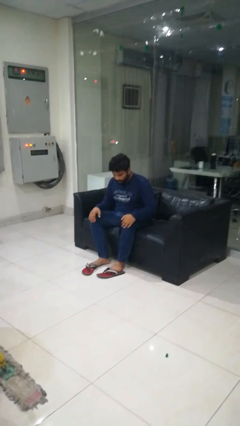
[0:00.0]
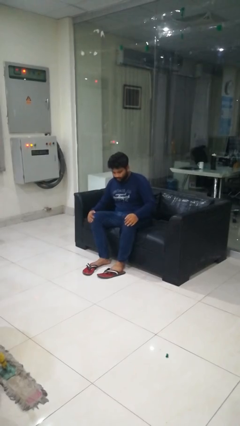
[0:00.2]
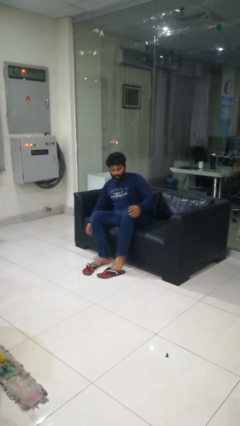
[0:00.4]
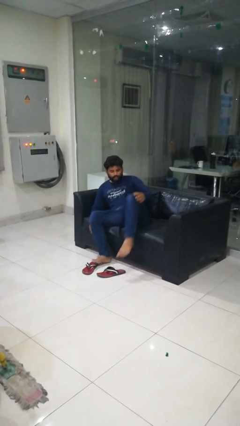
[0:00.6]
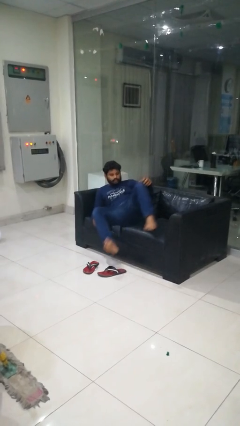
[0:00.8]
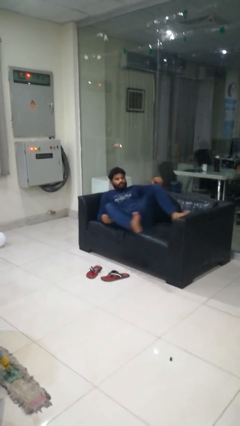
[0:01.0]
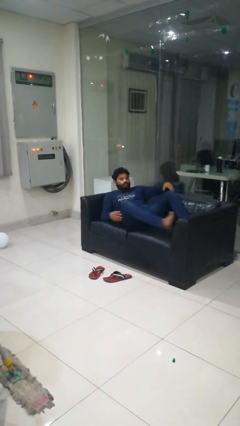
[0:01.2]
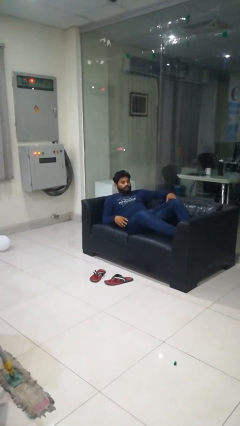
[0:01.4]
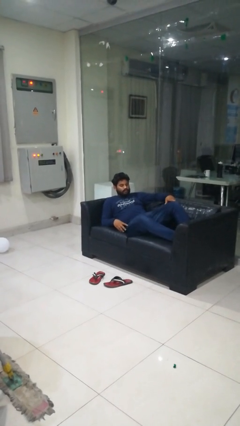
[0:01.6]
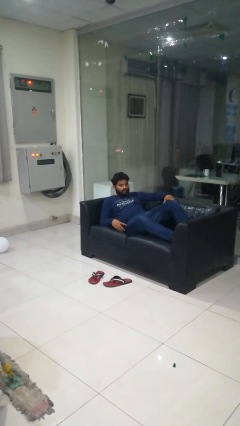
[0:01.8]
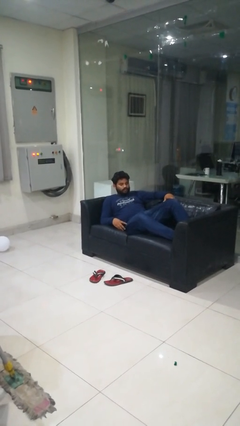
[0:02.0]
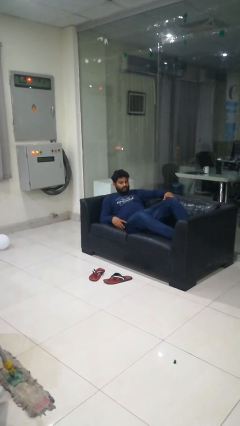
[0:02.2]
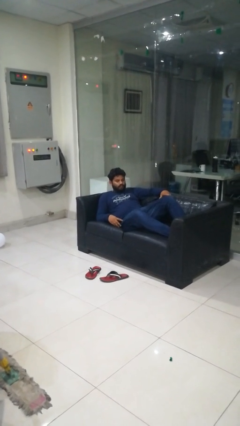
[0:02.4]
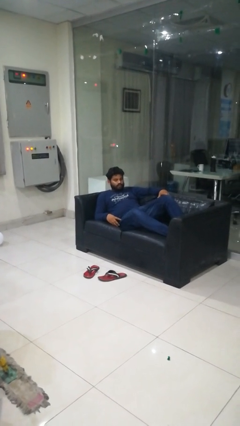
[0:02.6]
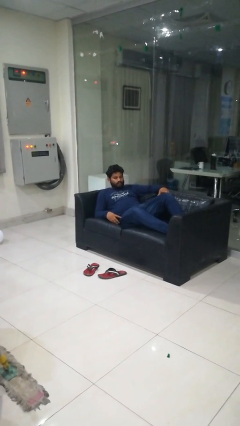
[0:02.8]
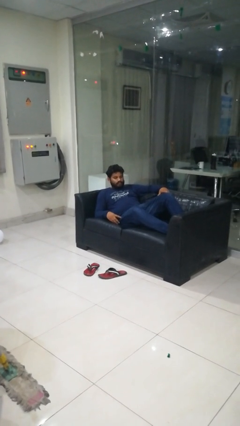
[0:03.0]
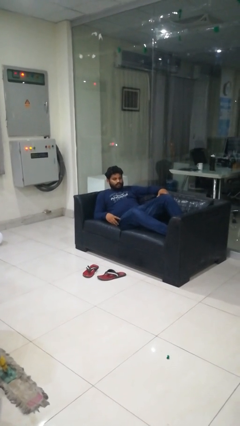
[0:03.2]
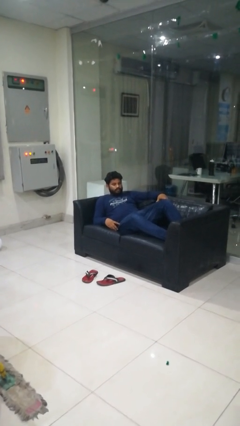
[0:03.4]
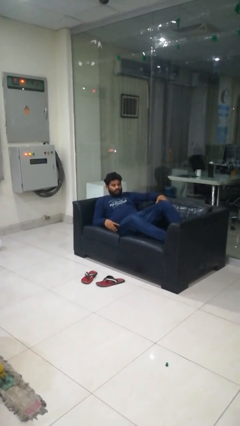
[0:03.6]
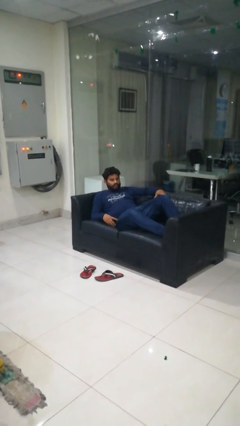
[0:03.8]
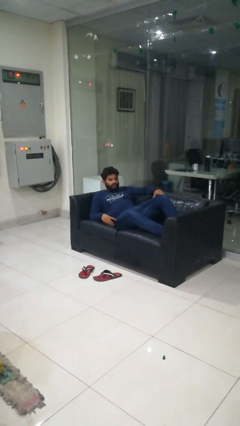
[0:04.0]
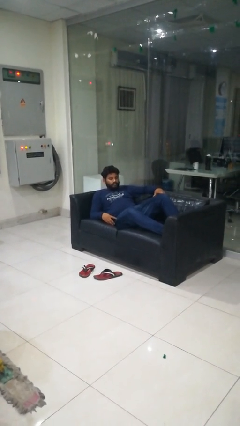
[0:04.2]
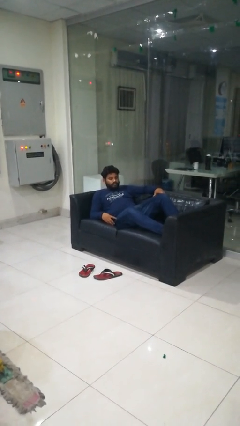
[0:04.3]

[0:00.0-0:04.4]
person lies down on couch

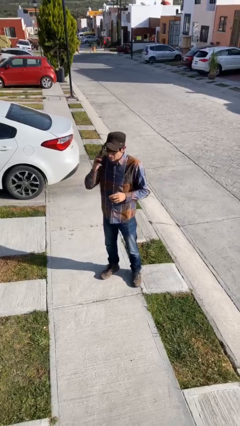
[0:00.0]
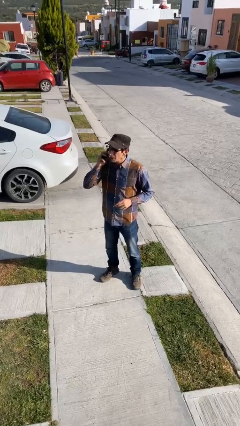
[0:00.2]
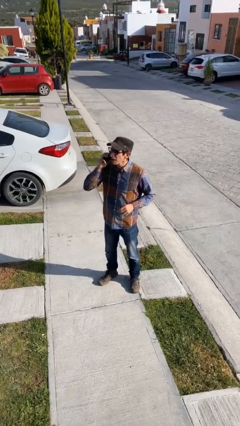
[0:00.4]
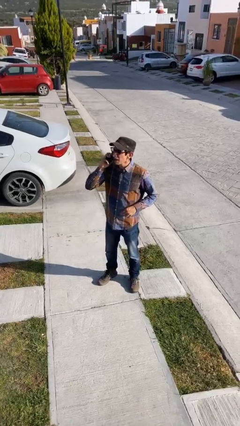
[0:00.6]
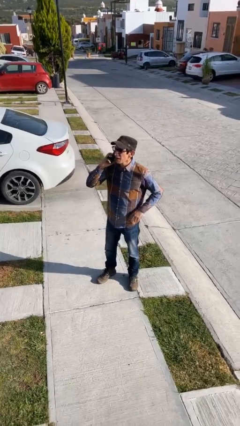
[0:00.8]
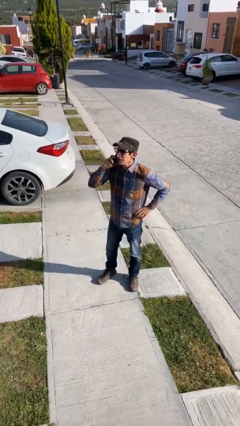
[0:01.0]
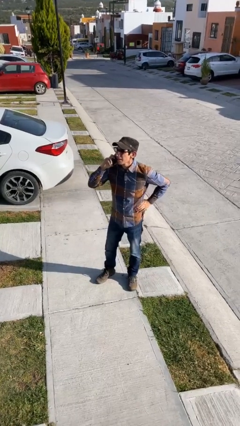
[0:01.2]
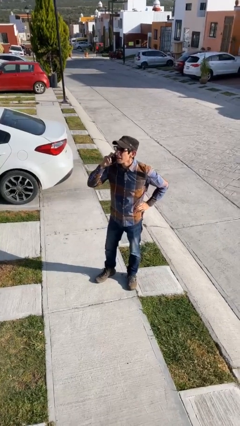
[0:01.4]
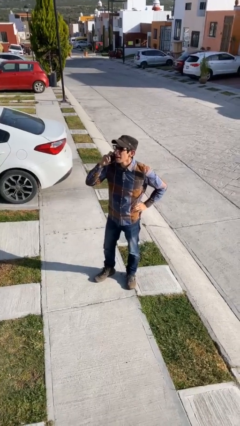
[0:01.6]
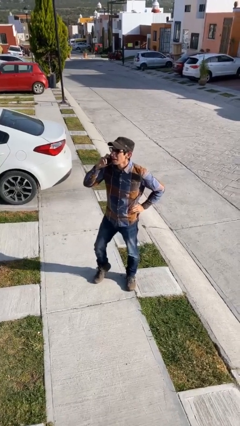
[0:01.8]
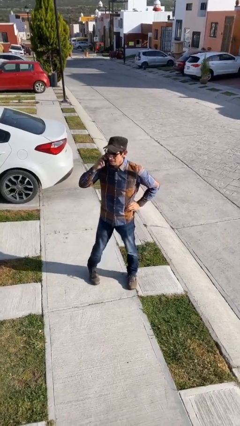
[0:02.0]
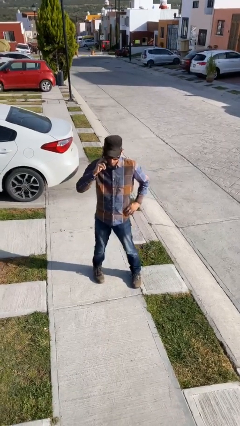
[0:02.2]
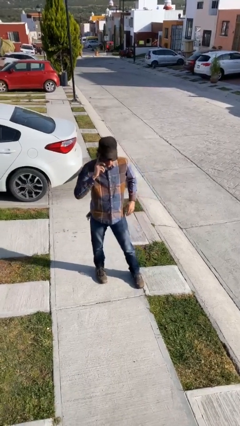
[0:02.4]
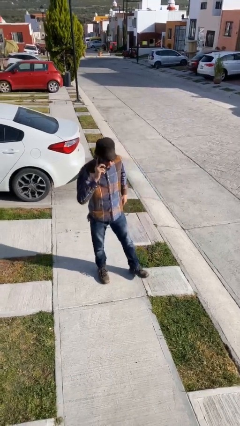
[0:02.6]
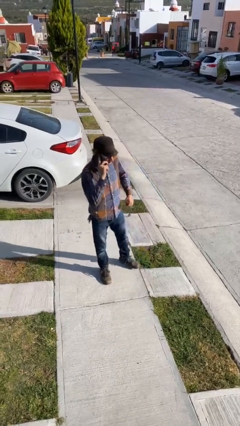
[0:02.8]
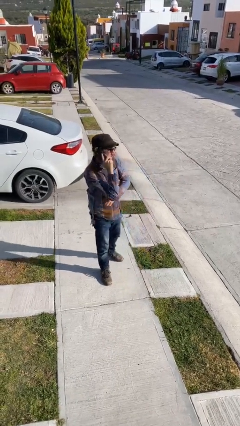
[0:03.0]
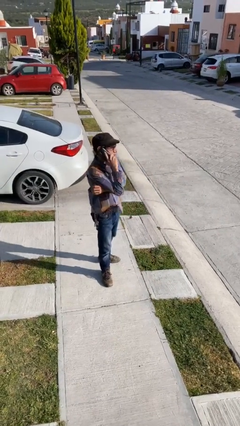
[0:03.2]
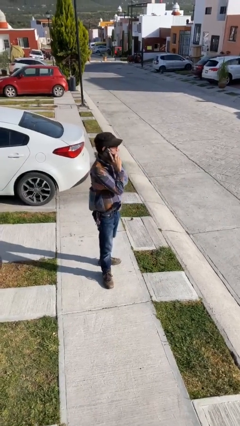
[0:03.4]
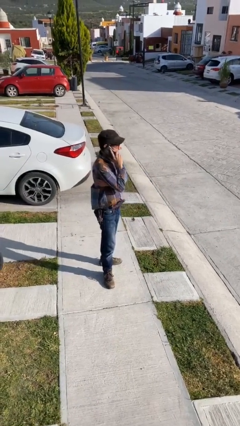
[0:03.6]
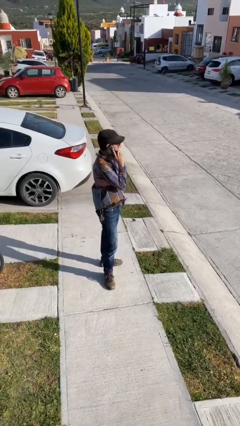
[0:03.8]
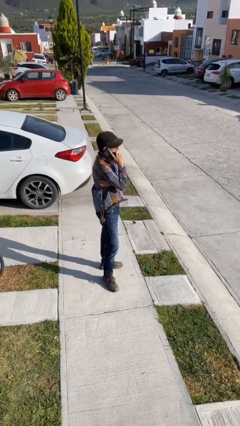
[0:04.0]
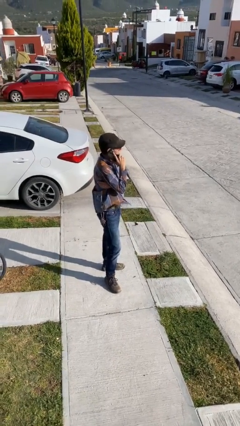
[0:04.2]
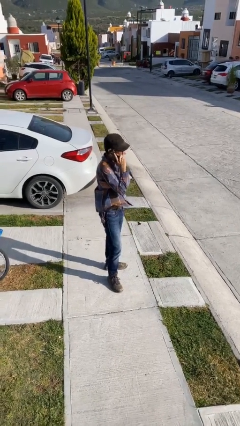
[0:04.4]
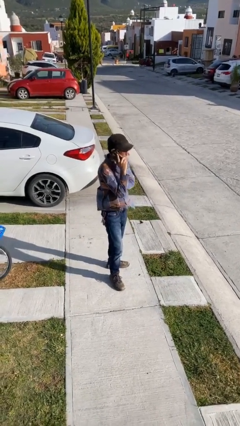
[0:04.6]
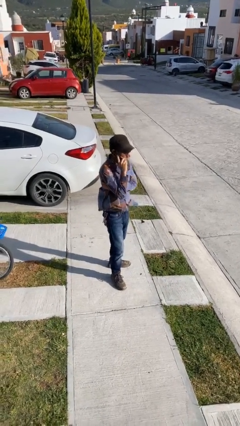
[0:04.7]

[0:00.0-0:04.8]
person talks on phone

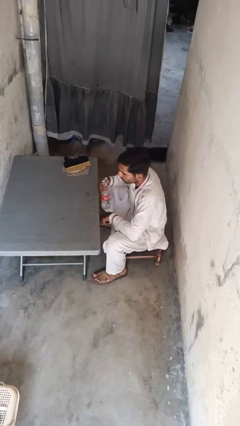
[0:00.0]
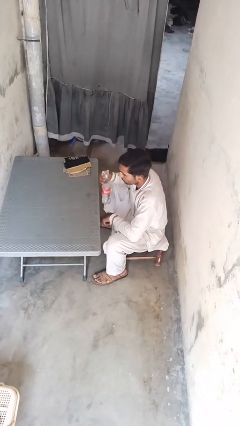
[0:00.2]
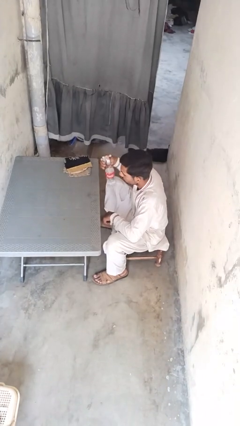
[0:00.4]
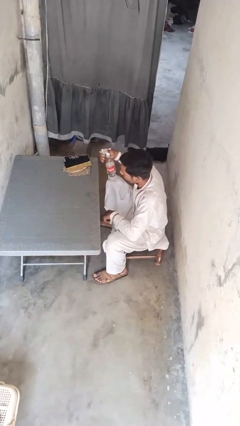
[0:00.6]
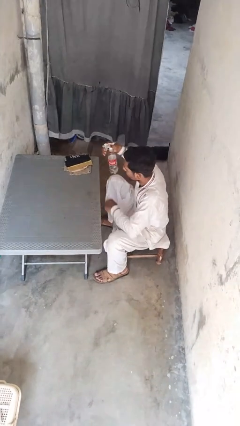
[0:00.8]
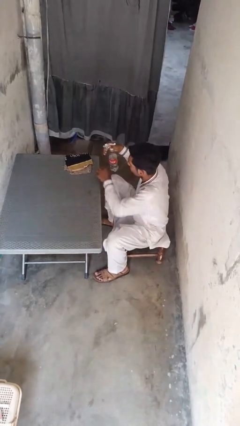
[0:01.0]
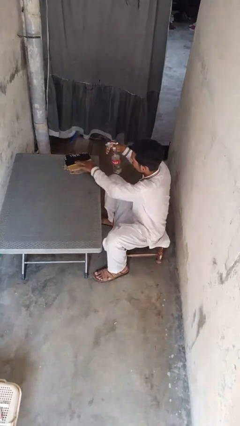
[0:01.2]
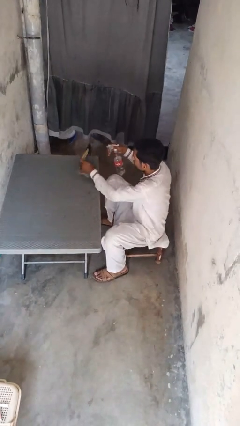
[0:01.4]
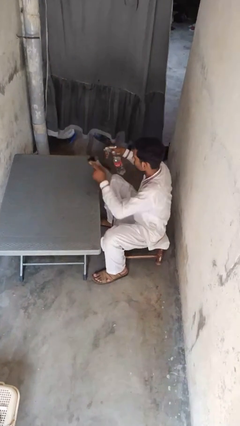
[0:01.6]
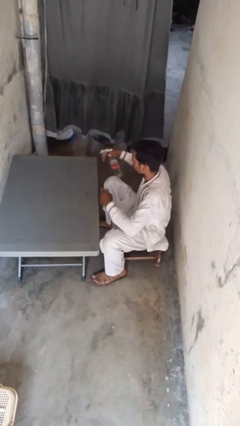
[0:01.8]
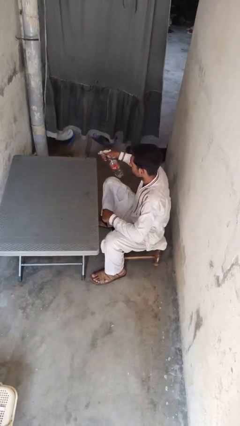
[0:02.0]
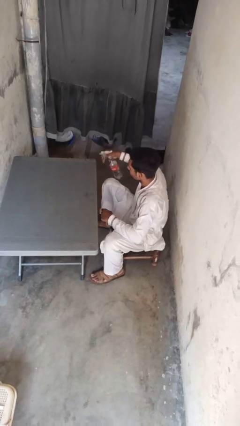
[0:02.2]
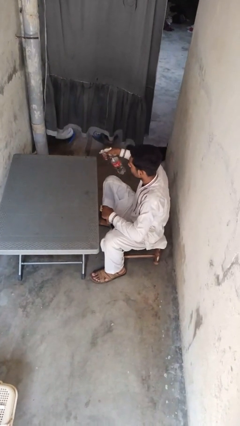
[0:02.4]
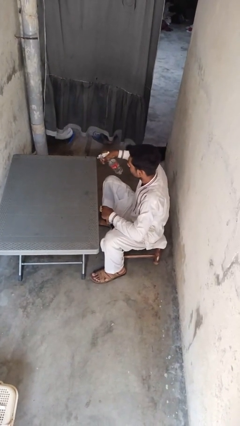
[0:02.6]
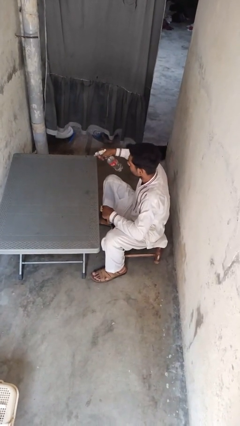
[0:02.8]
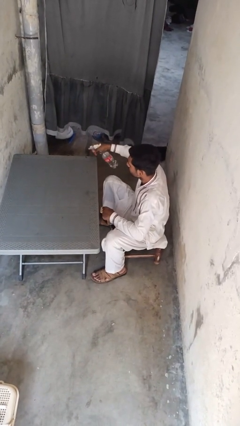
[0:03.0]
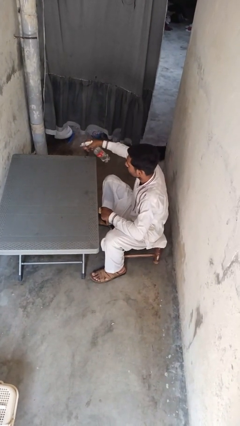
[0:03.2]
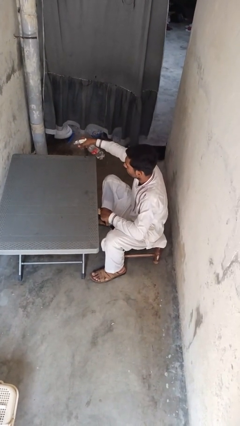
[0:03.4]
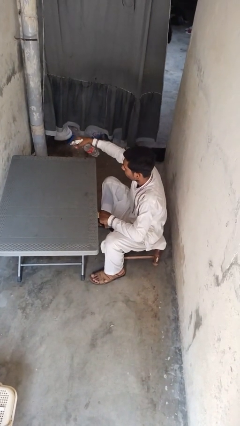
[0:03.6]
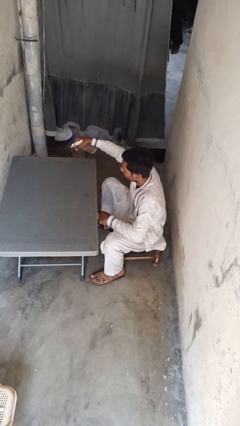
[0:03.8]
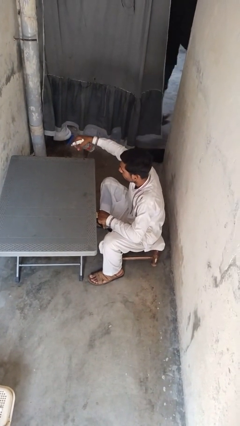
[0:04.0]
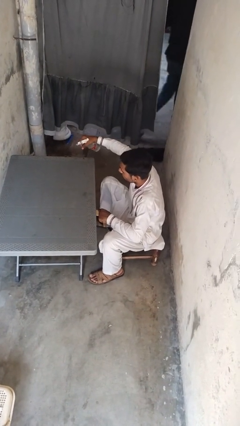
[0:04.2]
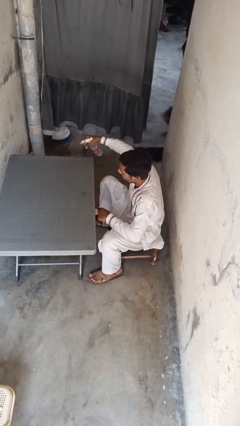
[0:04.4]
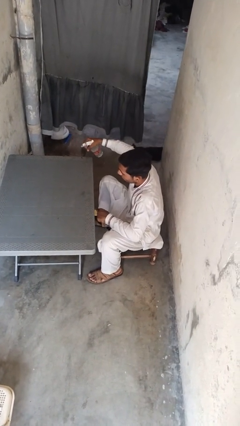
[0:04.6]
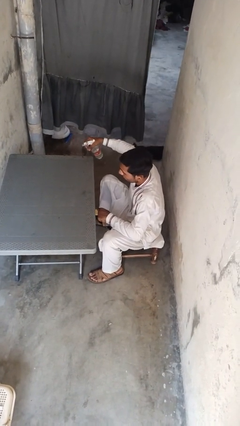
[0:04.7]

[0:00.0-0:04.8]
person sprays from bottle

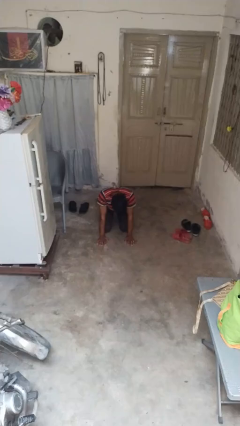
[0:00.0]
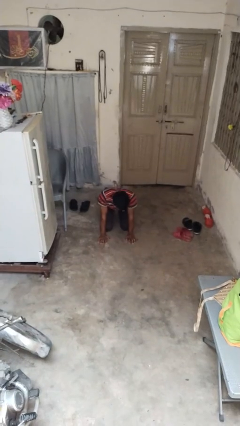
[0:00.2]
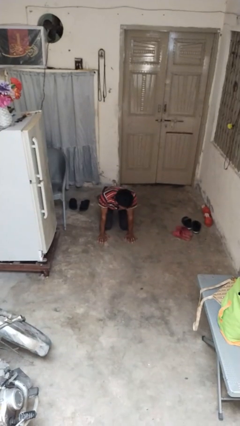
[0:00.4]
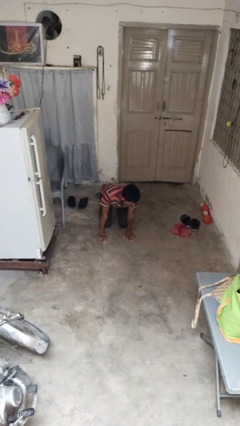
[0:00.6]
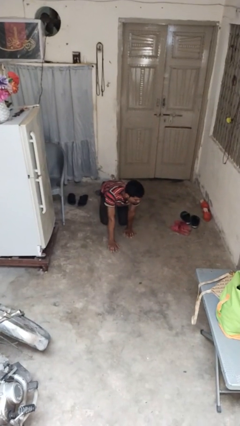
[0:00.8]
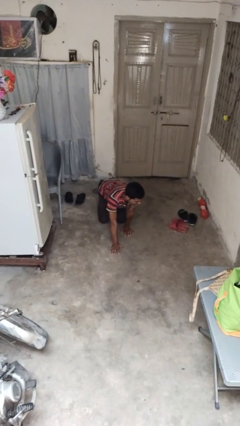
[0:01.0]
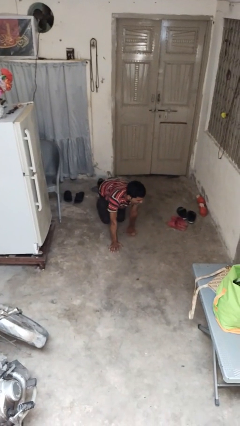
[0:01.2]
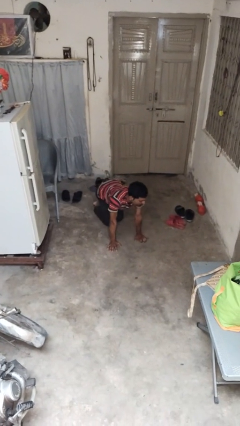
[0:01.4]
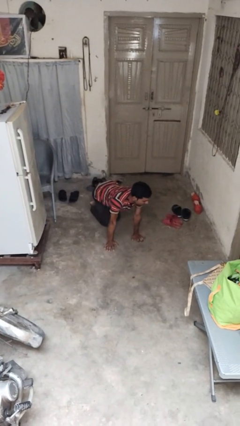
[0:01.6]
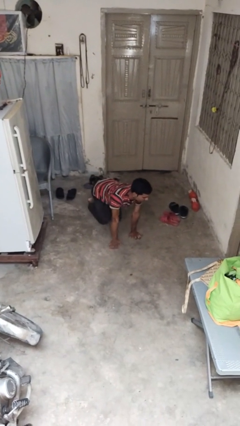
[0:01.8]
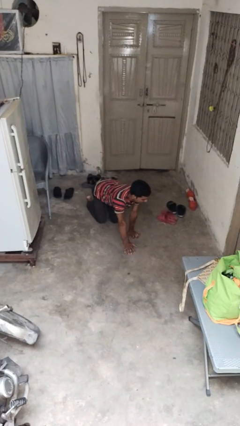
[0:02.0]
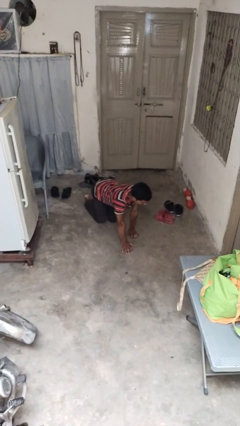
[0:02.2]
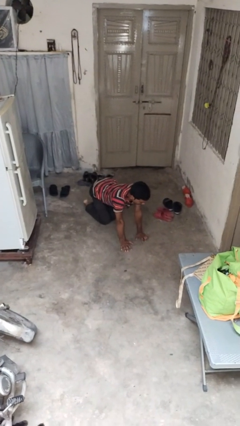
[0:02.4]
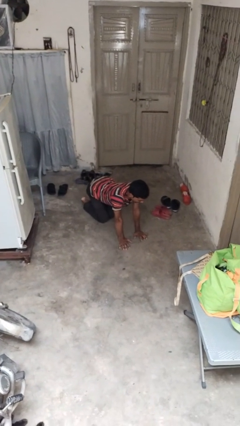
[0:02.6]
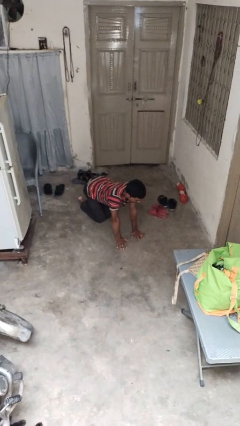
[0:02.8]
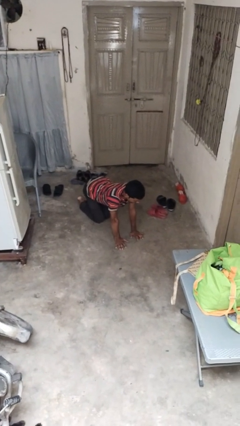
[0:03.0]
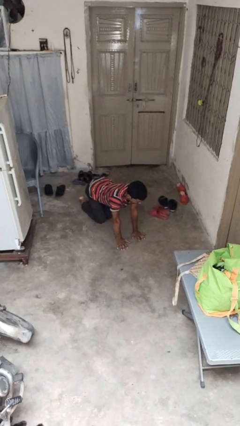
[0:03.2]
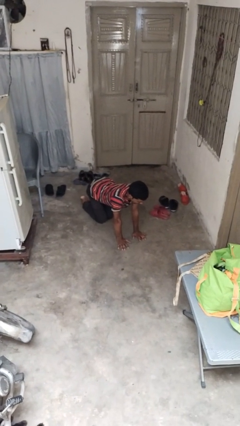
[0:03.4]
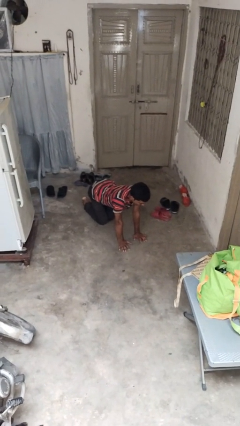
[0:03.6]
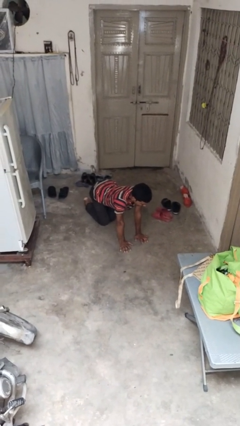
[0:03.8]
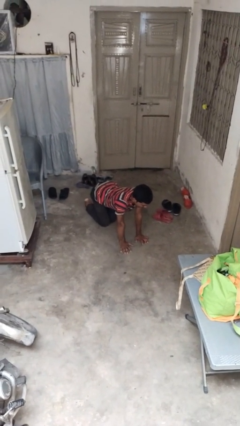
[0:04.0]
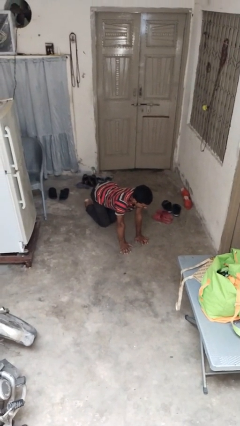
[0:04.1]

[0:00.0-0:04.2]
person crawls
